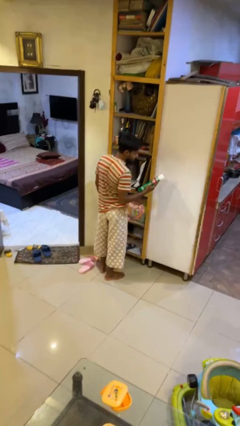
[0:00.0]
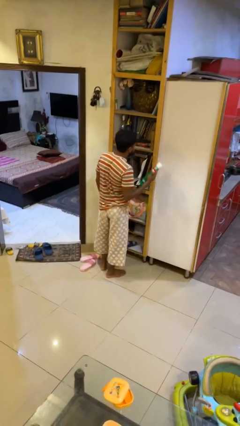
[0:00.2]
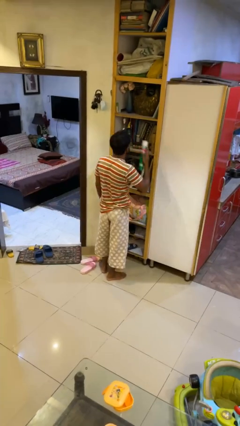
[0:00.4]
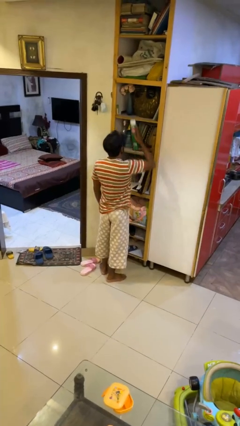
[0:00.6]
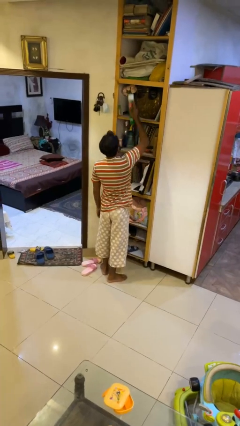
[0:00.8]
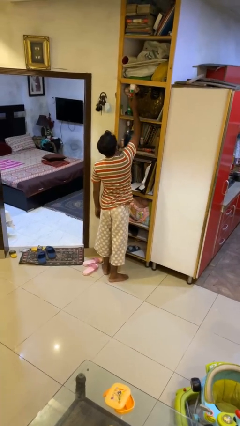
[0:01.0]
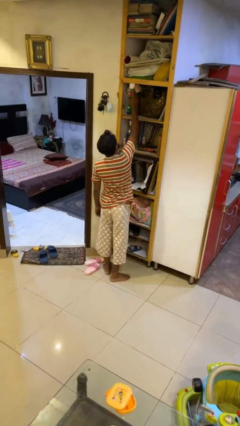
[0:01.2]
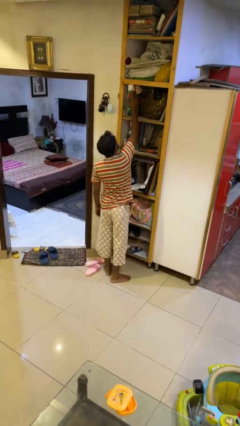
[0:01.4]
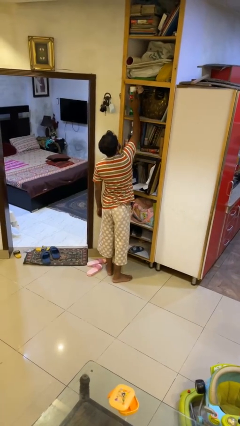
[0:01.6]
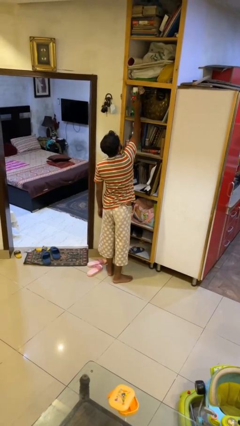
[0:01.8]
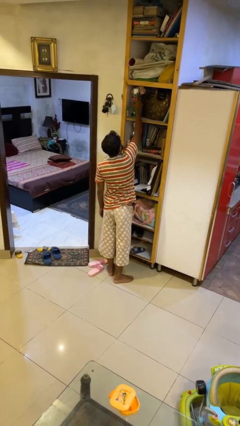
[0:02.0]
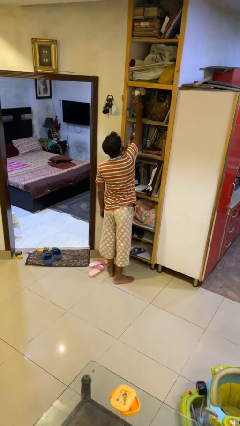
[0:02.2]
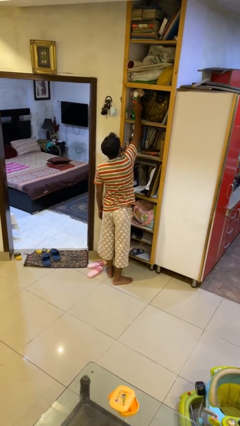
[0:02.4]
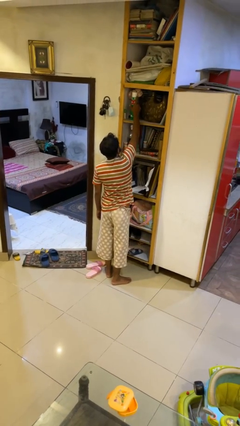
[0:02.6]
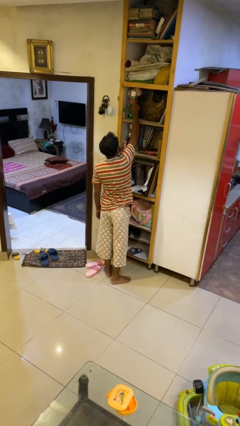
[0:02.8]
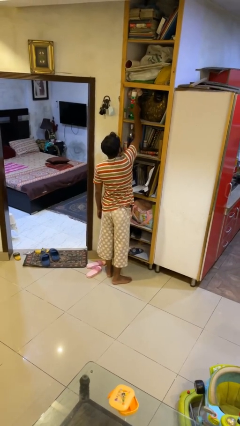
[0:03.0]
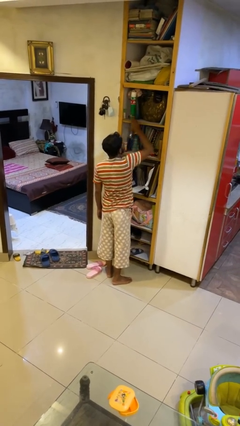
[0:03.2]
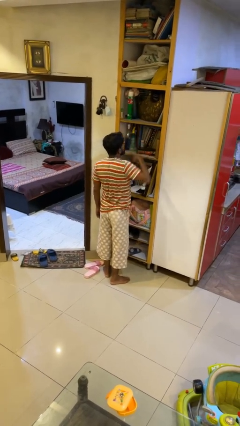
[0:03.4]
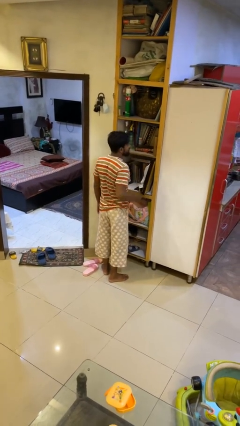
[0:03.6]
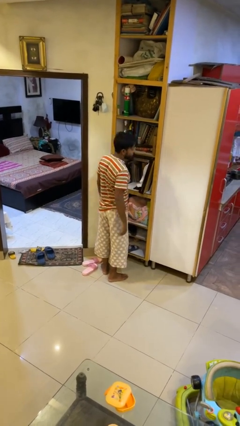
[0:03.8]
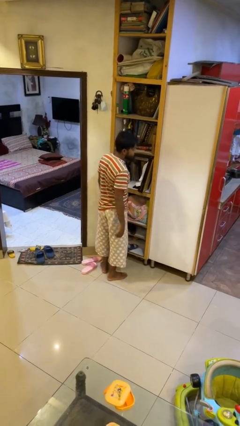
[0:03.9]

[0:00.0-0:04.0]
person puts down object on shelf

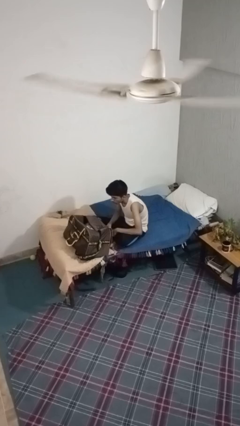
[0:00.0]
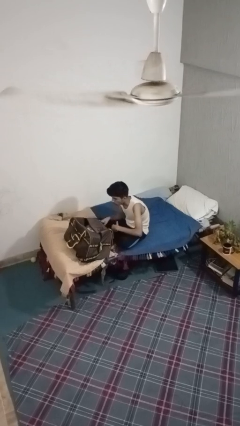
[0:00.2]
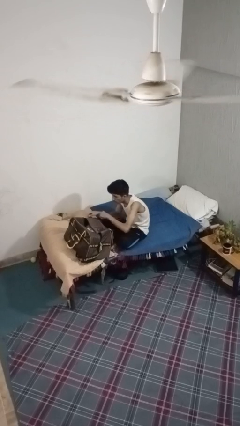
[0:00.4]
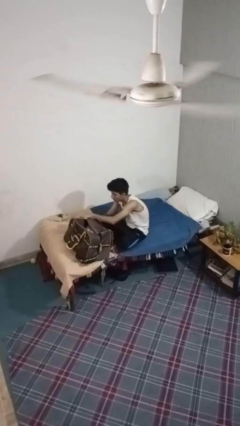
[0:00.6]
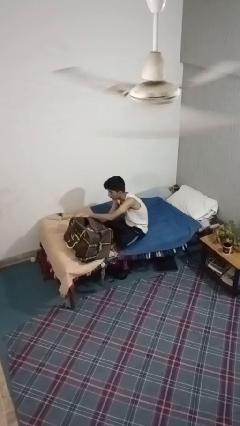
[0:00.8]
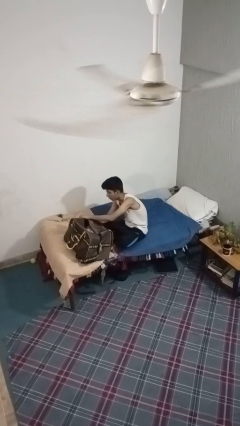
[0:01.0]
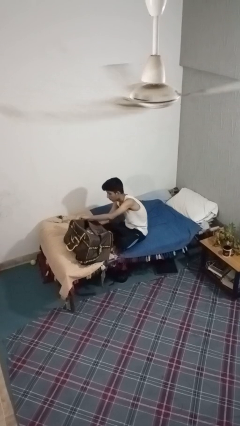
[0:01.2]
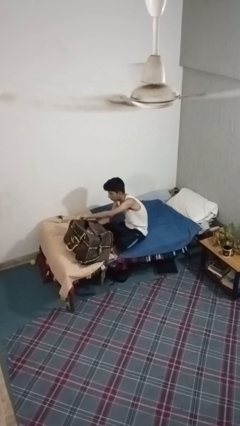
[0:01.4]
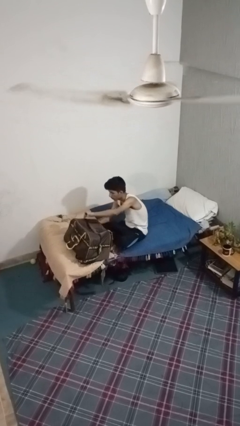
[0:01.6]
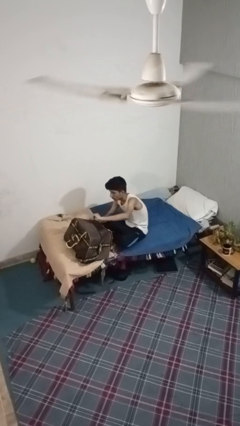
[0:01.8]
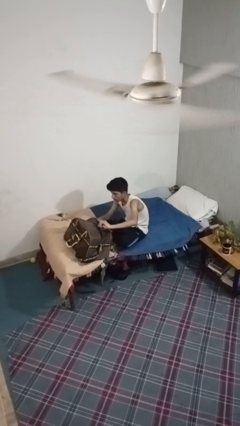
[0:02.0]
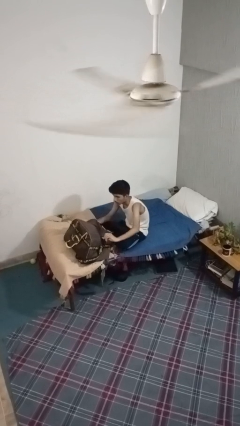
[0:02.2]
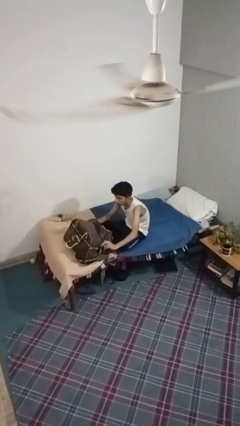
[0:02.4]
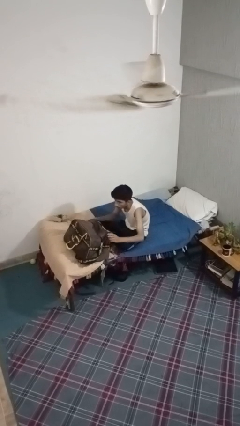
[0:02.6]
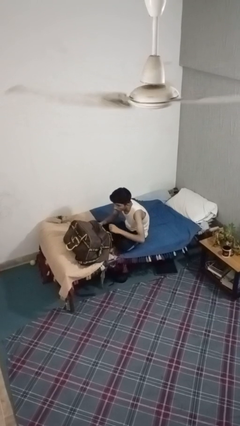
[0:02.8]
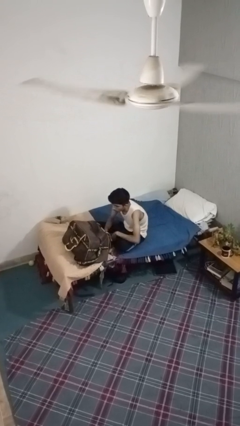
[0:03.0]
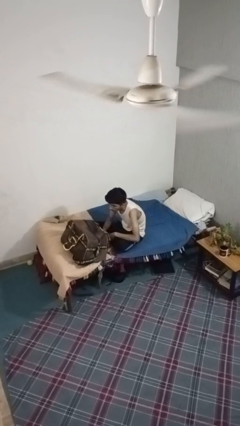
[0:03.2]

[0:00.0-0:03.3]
person closes suitcase

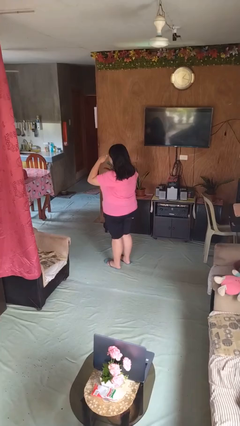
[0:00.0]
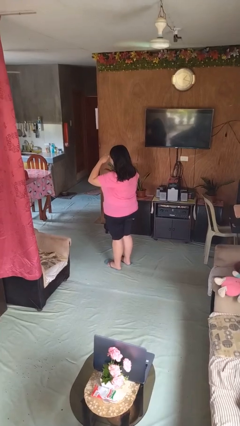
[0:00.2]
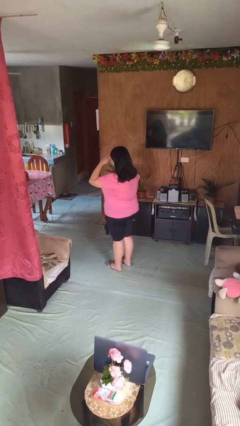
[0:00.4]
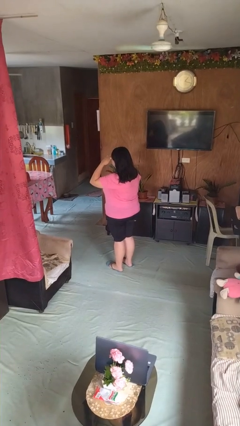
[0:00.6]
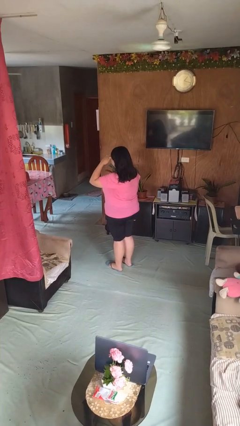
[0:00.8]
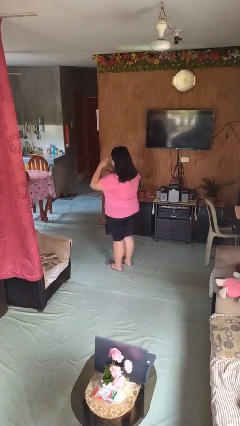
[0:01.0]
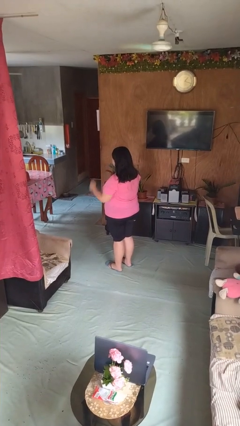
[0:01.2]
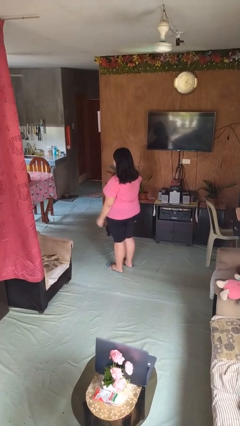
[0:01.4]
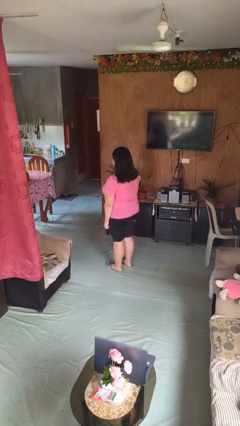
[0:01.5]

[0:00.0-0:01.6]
person salutes

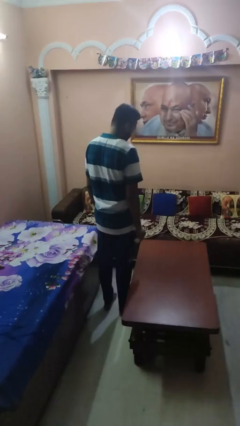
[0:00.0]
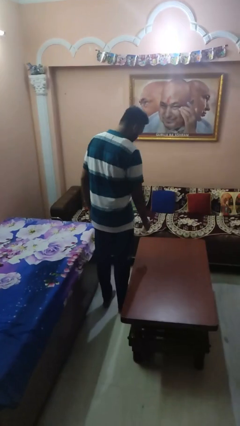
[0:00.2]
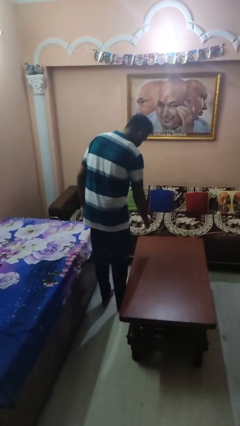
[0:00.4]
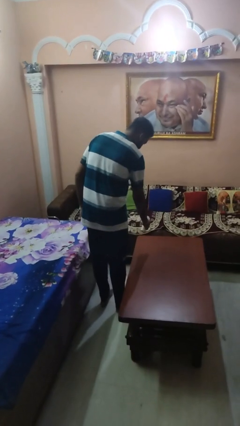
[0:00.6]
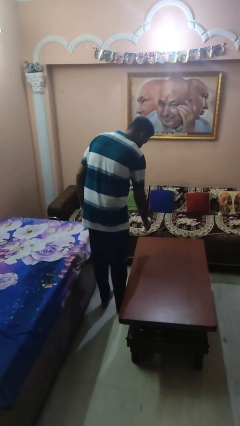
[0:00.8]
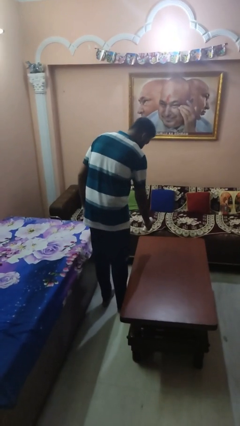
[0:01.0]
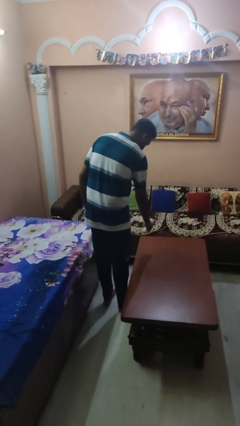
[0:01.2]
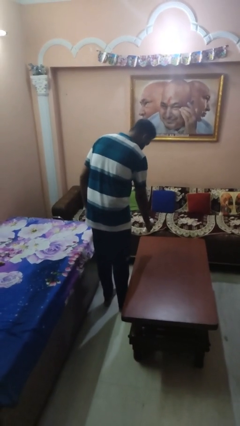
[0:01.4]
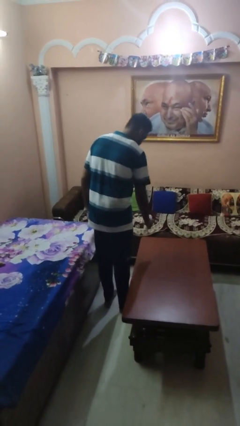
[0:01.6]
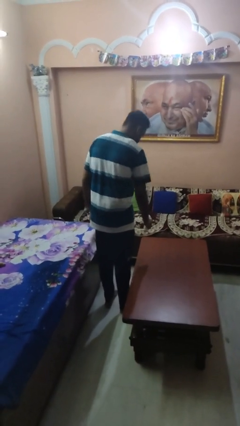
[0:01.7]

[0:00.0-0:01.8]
person sprays from bottle

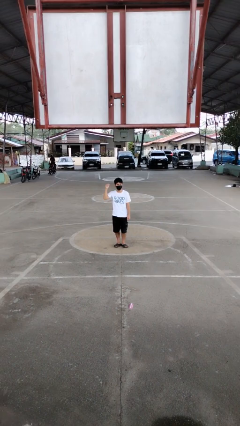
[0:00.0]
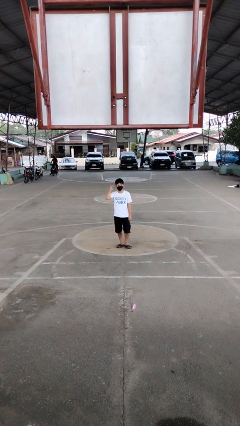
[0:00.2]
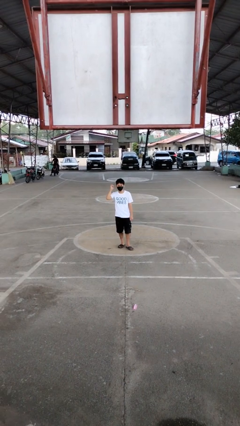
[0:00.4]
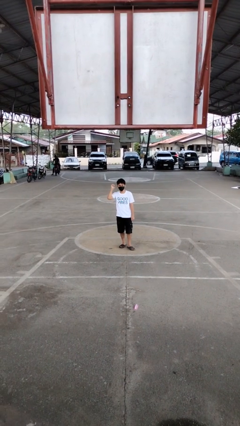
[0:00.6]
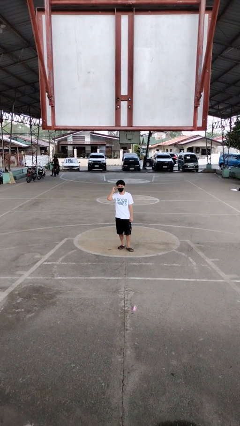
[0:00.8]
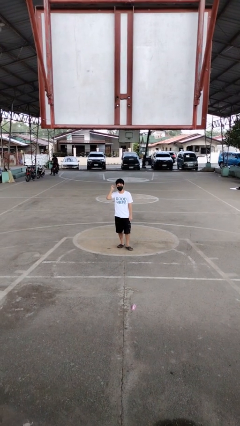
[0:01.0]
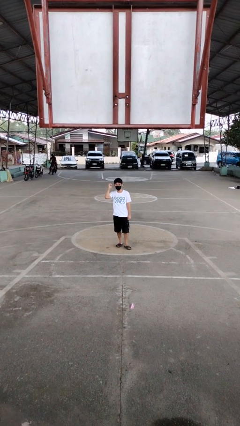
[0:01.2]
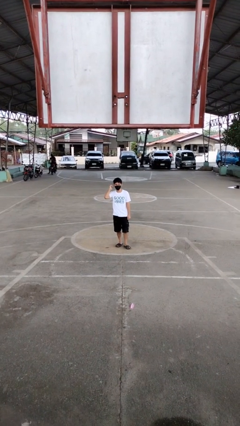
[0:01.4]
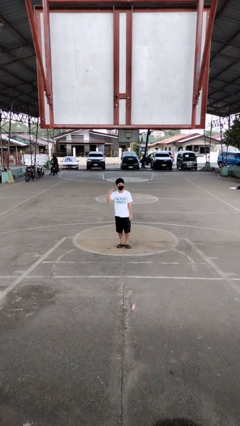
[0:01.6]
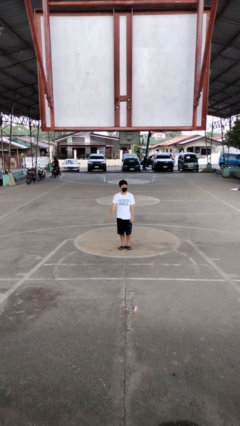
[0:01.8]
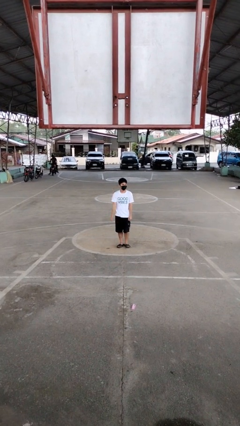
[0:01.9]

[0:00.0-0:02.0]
person gestures behind me

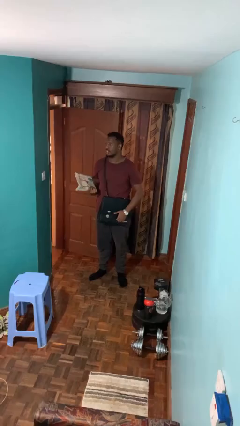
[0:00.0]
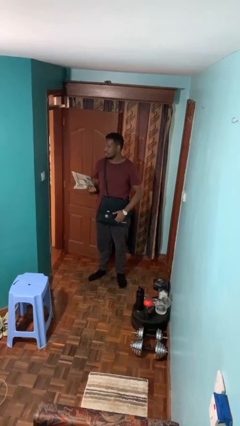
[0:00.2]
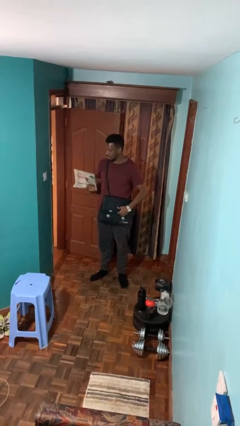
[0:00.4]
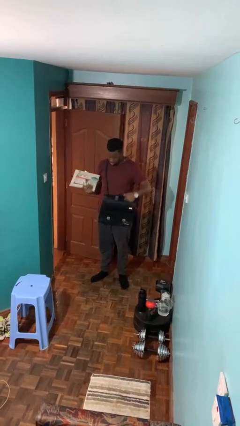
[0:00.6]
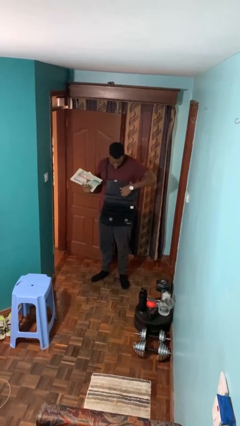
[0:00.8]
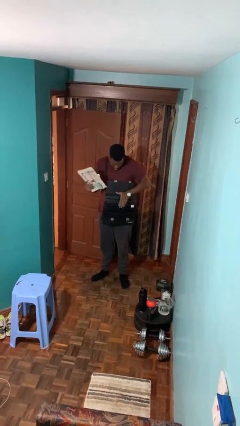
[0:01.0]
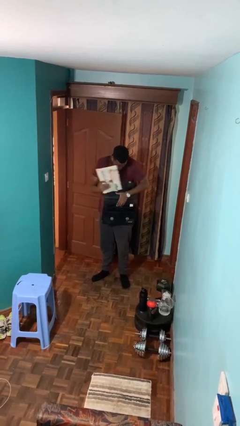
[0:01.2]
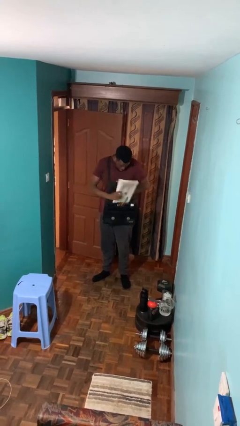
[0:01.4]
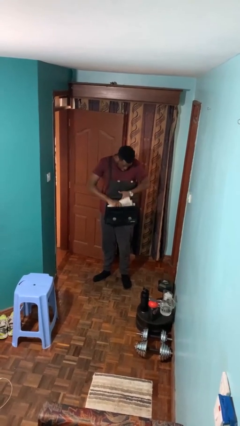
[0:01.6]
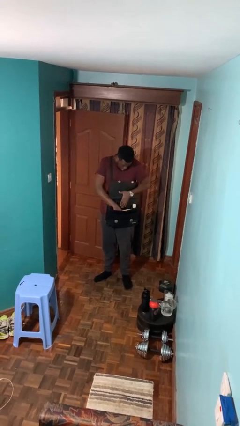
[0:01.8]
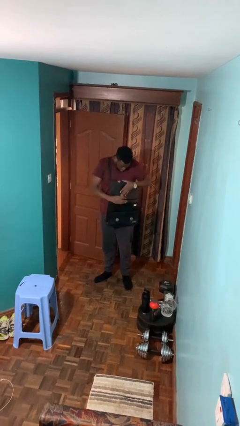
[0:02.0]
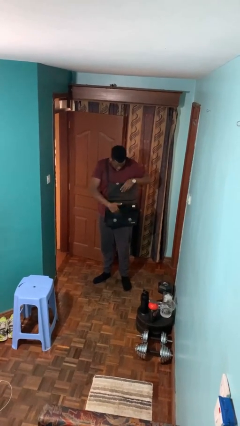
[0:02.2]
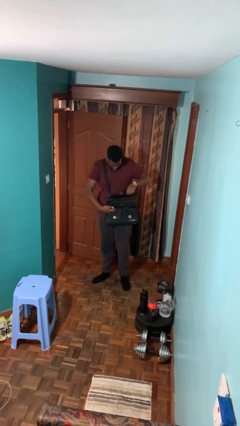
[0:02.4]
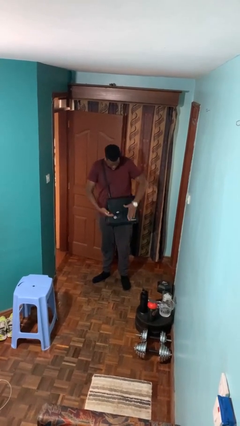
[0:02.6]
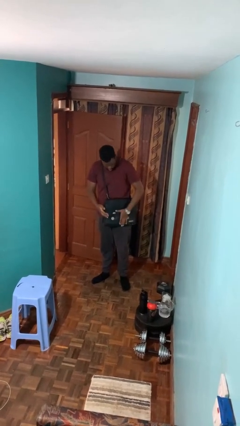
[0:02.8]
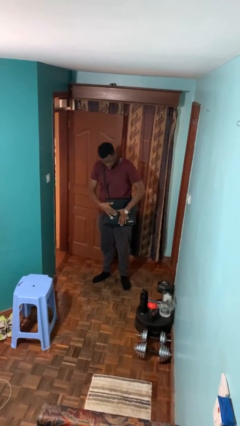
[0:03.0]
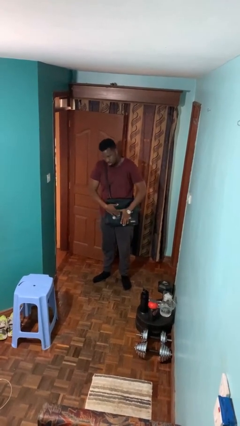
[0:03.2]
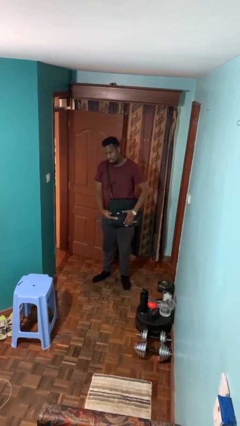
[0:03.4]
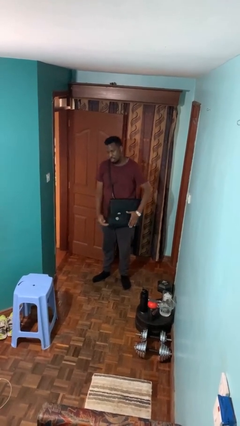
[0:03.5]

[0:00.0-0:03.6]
person puts object into purse

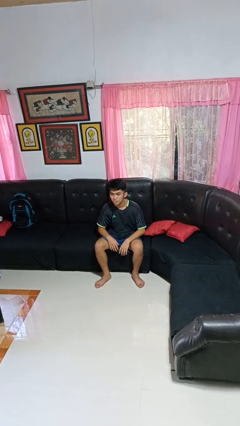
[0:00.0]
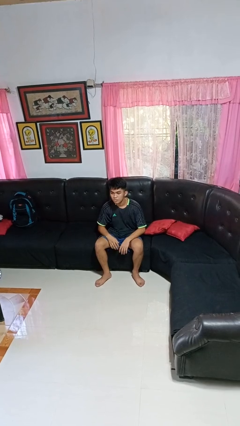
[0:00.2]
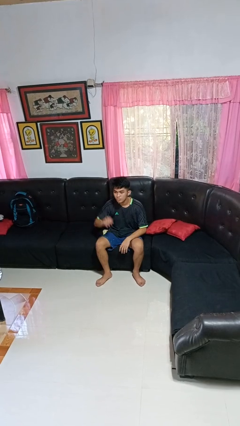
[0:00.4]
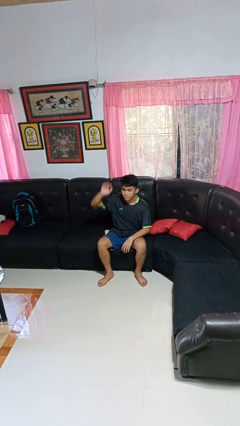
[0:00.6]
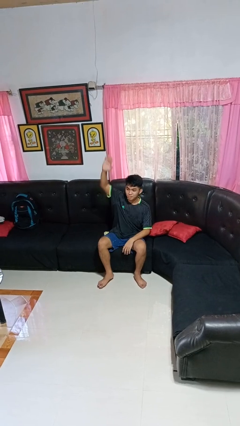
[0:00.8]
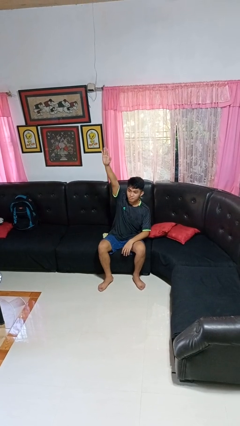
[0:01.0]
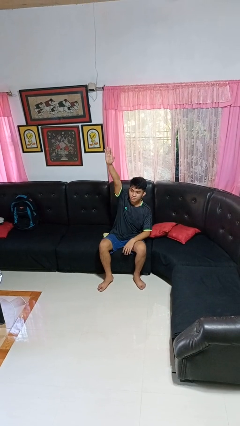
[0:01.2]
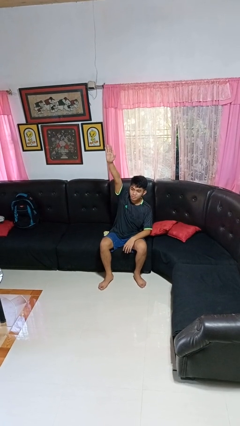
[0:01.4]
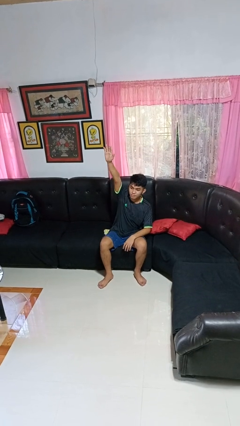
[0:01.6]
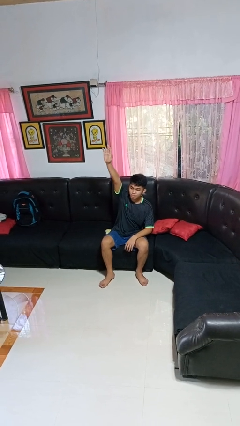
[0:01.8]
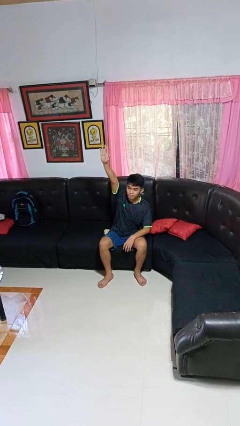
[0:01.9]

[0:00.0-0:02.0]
person gestures raise hand
